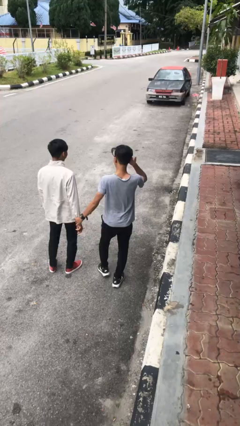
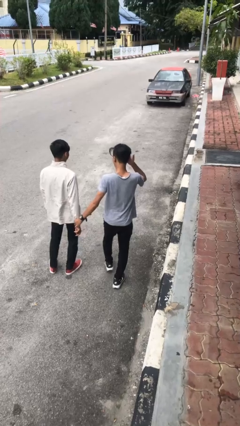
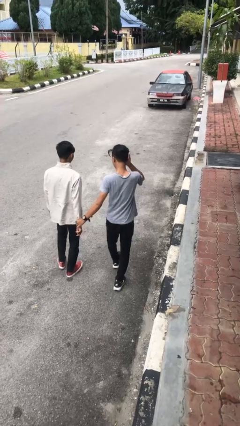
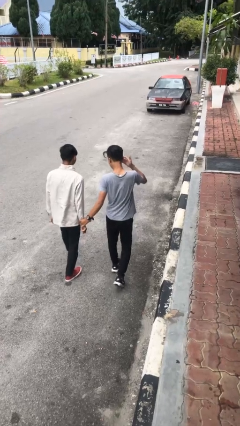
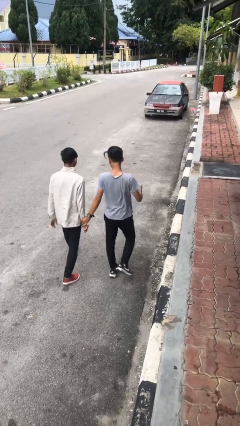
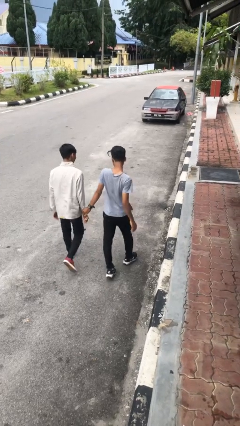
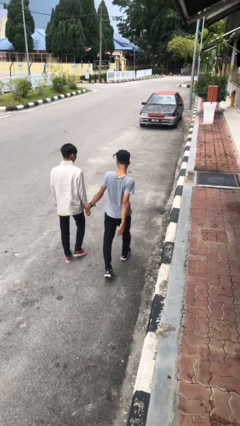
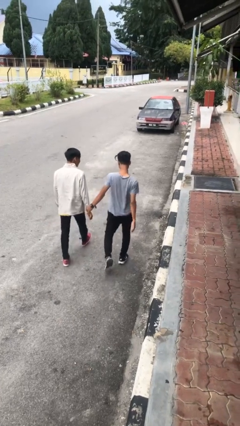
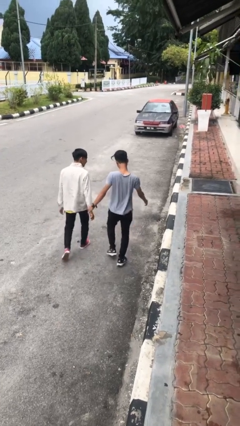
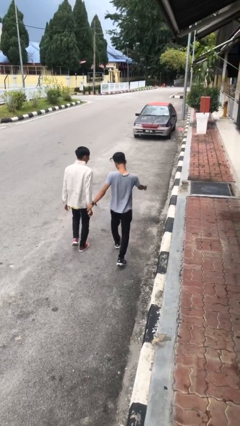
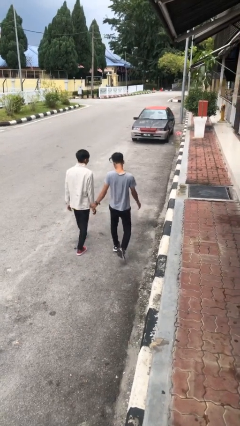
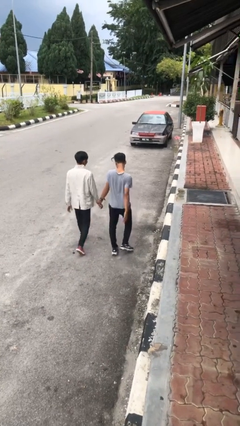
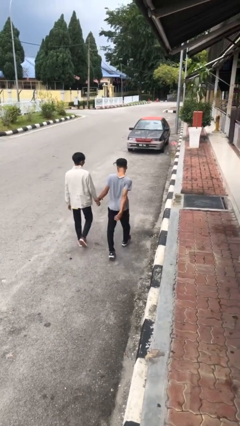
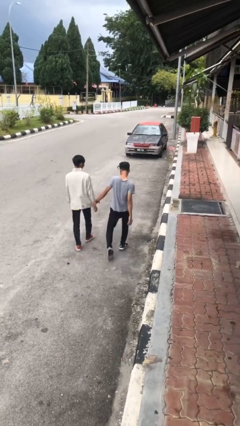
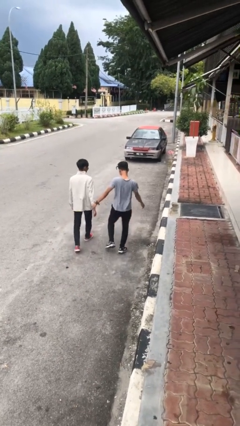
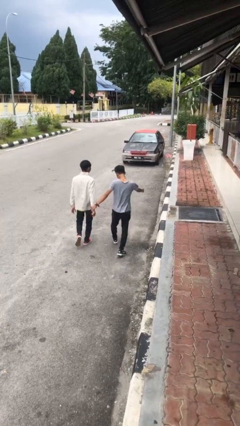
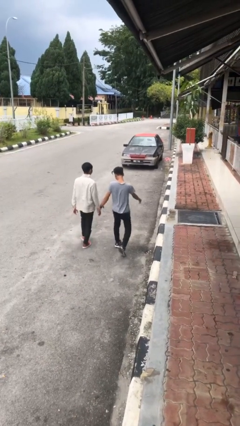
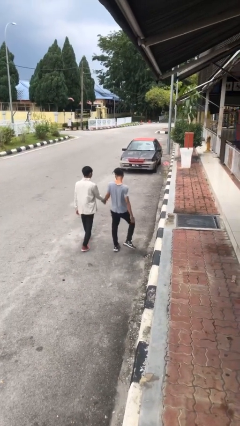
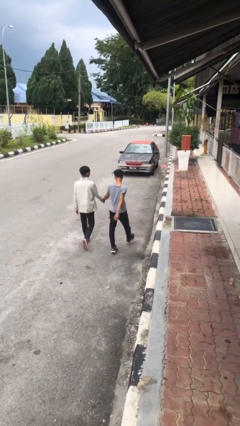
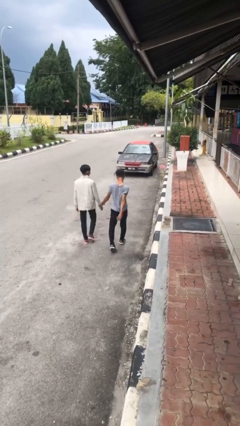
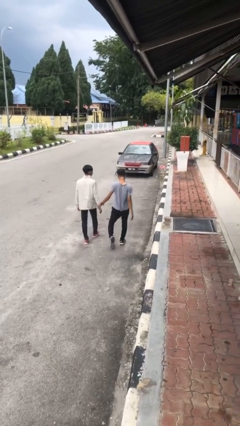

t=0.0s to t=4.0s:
person holds hand

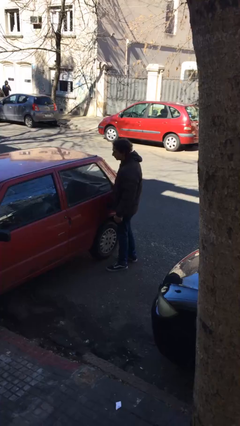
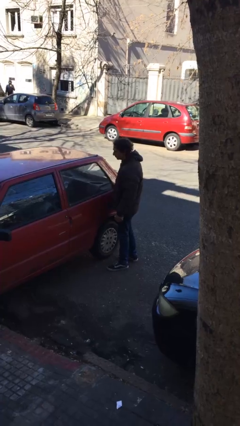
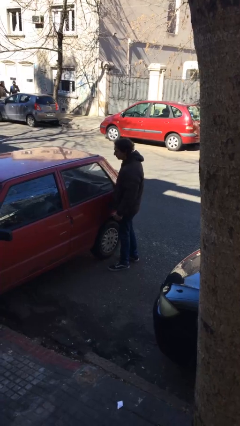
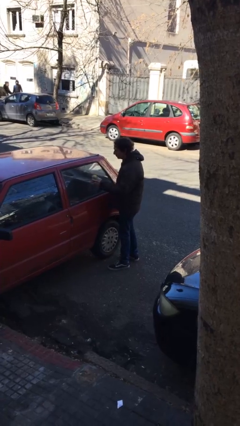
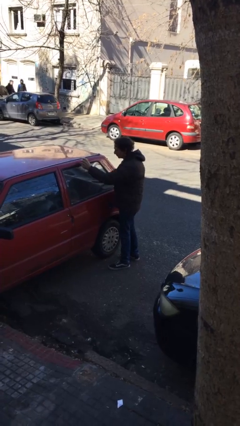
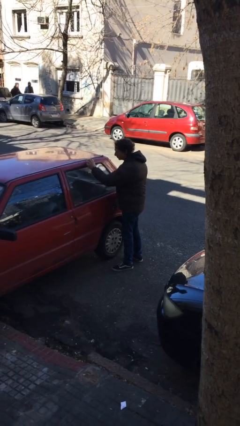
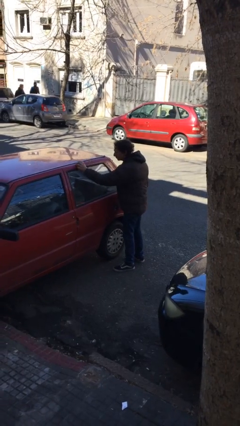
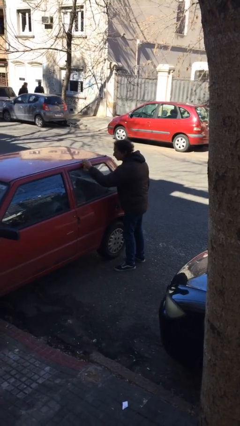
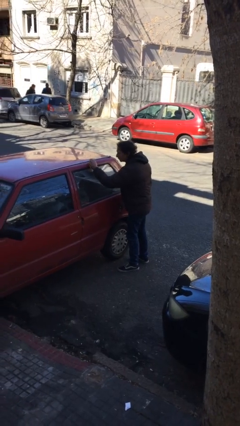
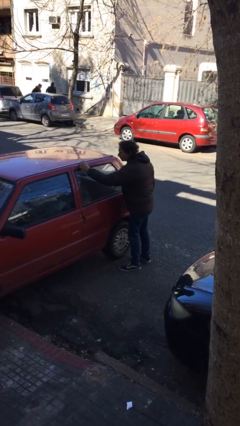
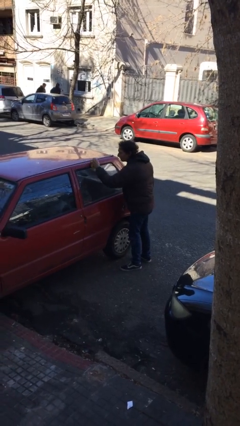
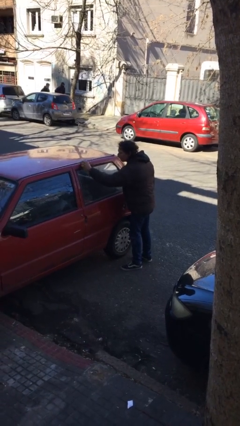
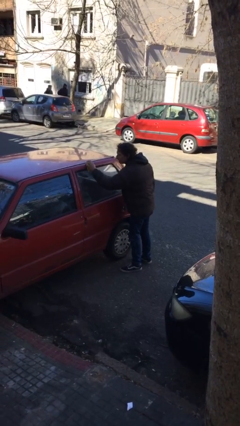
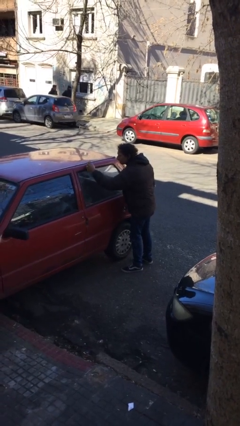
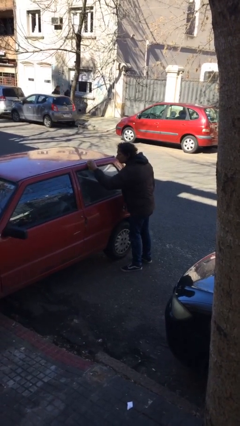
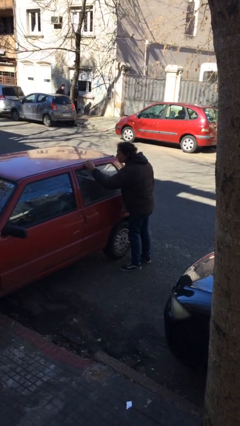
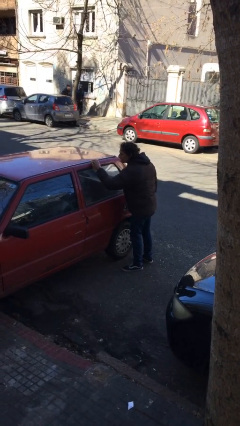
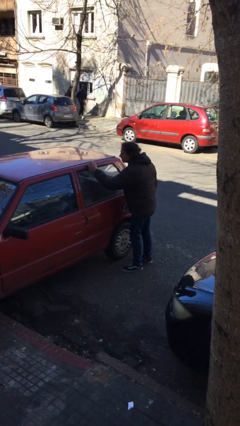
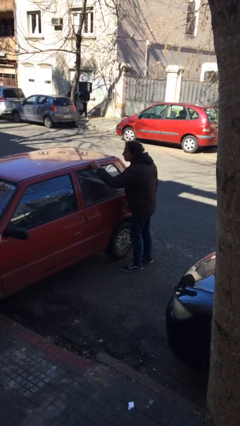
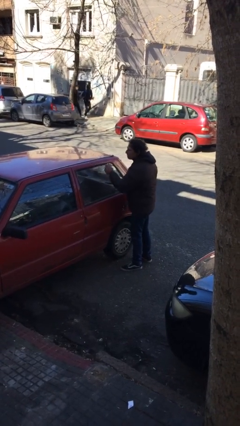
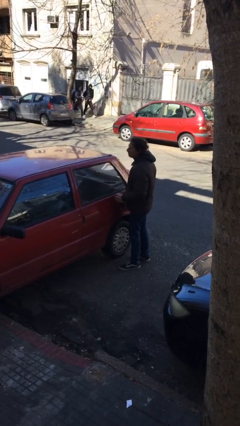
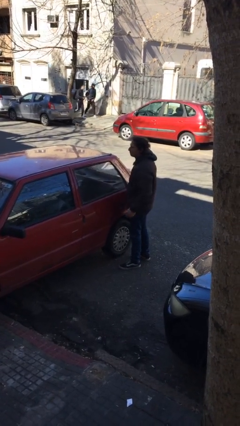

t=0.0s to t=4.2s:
person polishes car with rag

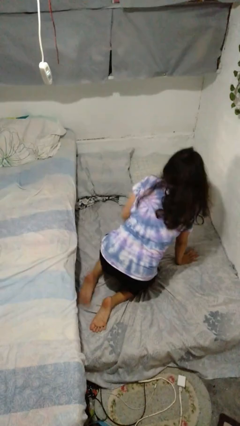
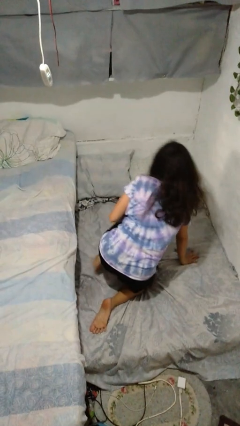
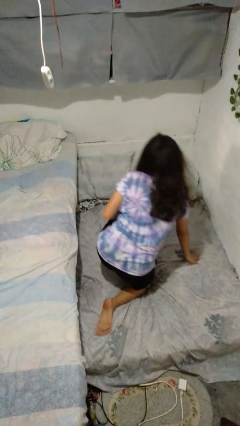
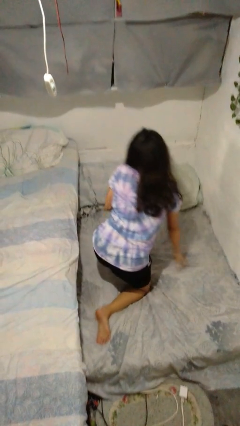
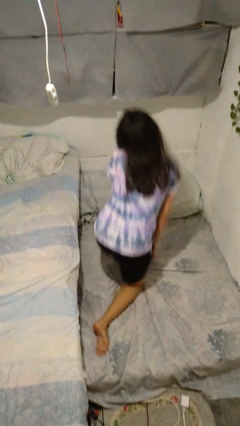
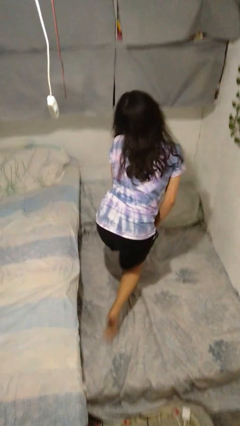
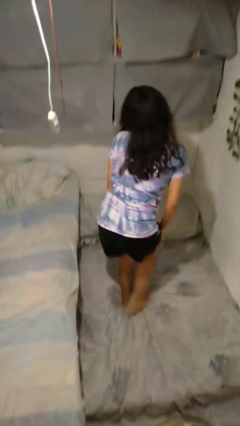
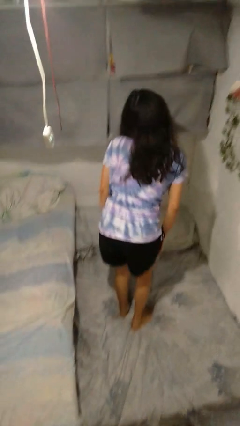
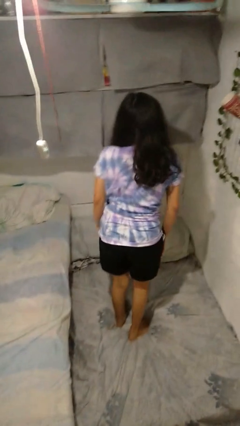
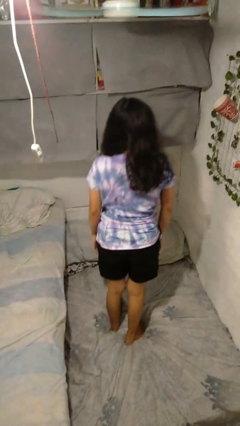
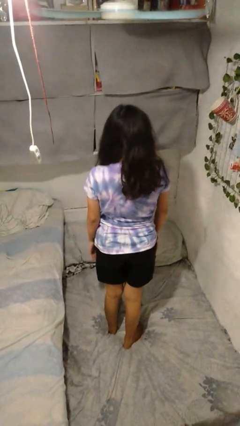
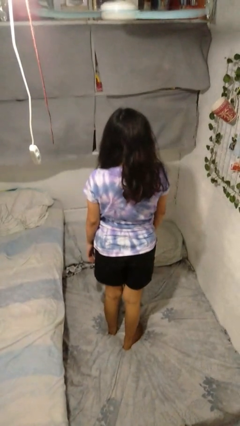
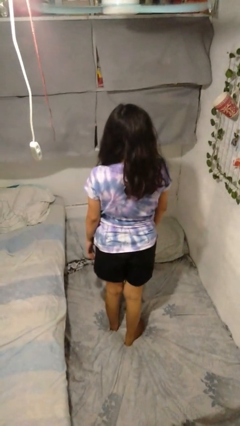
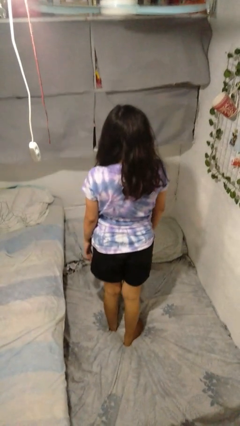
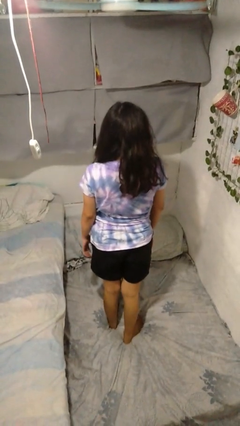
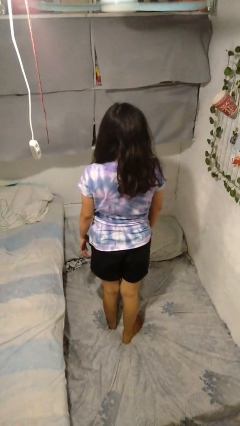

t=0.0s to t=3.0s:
person stands up from floor

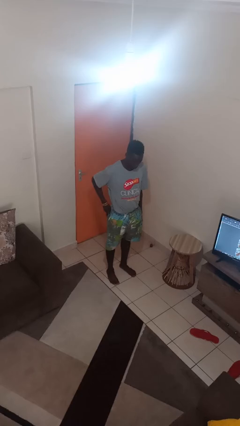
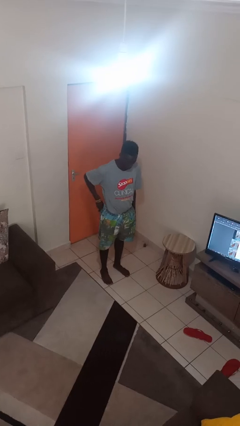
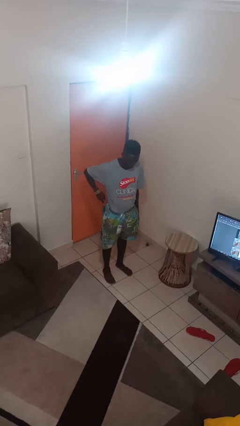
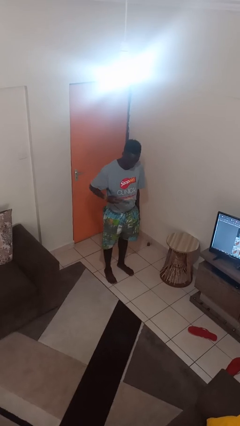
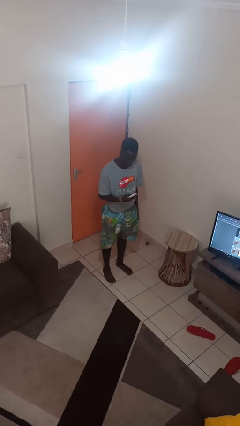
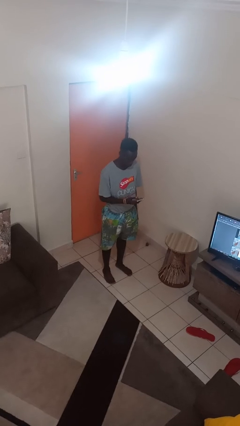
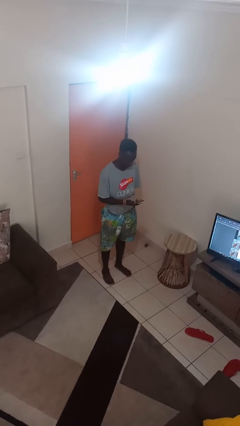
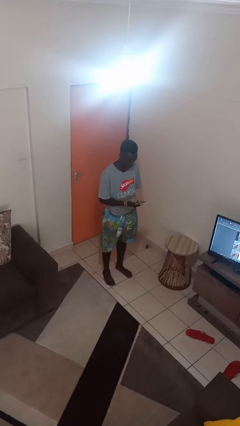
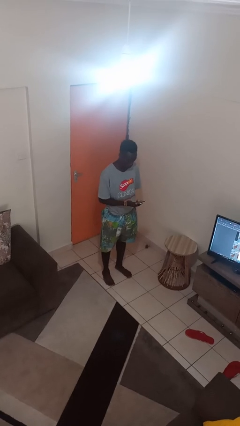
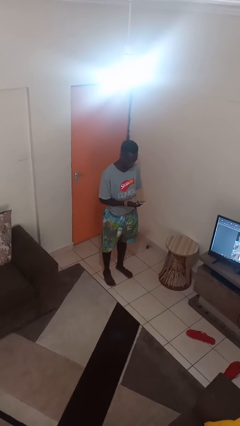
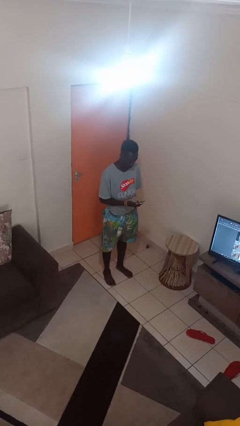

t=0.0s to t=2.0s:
person takes phone from pocket

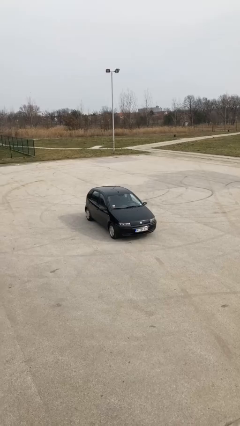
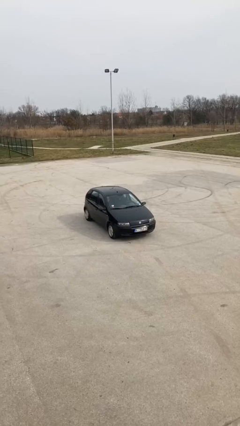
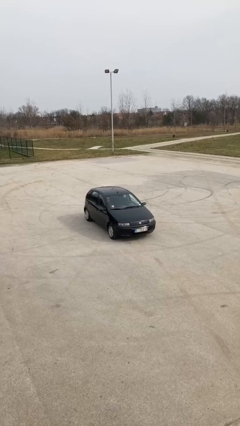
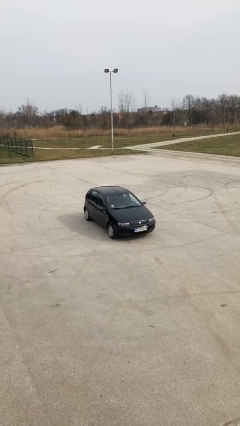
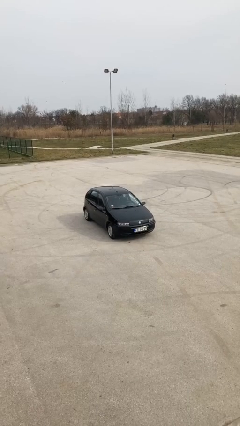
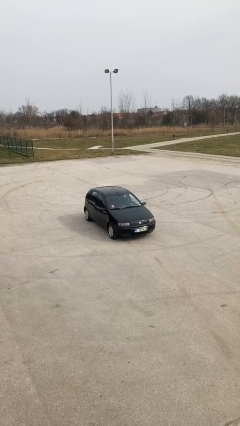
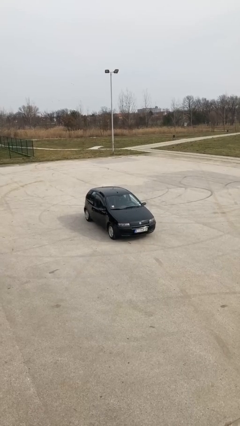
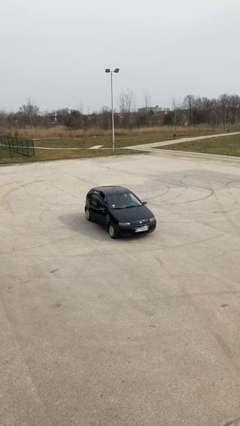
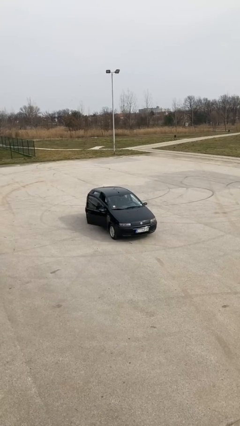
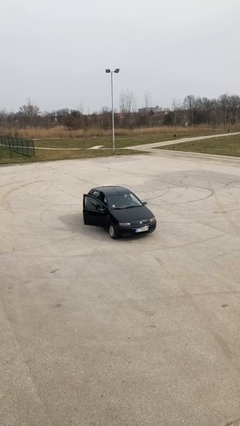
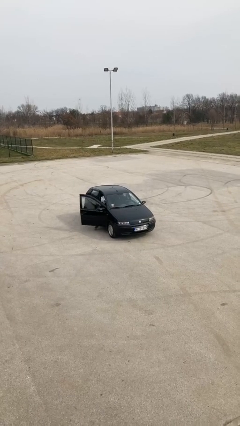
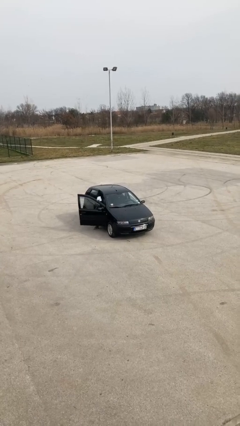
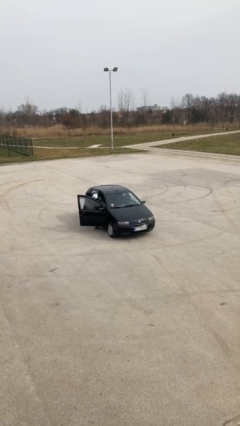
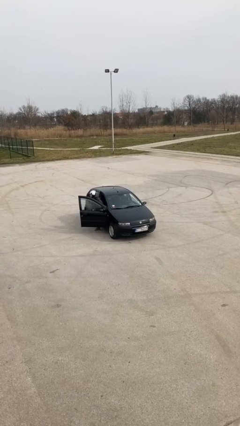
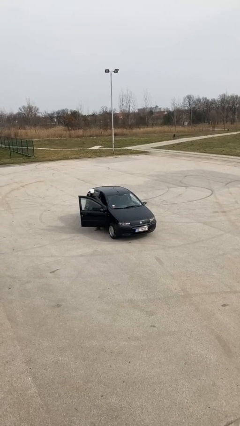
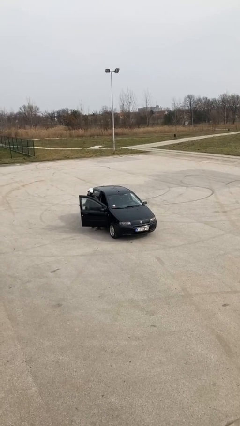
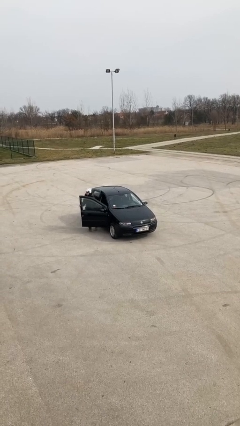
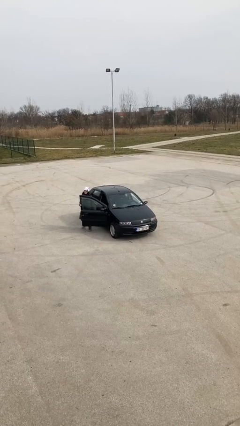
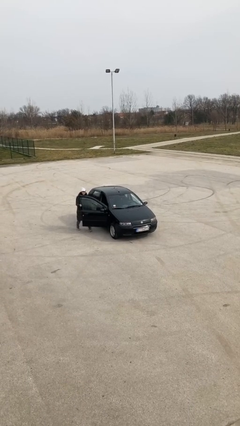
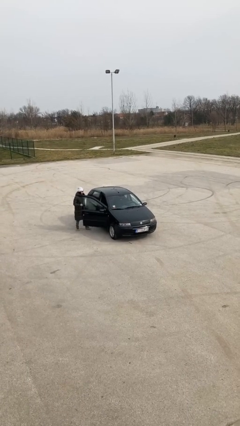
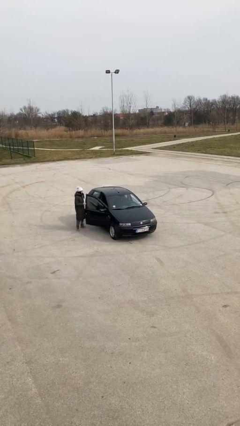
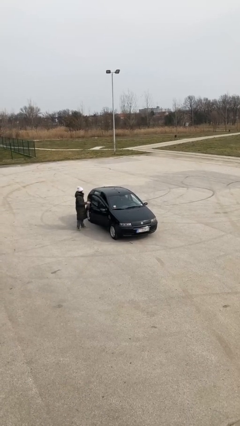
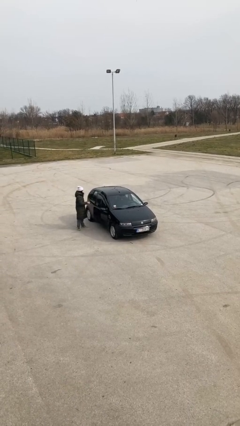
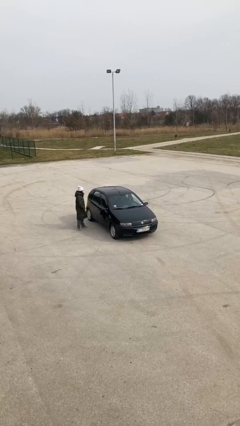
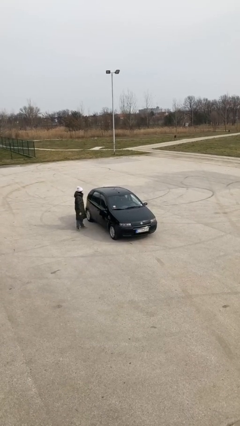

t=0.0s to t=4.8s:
car drops off person
